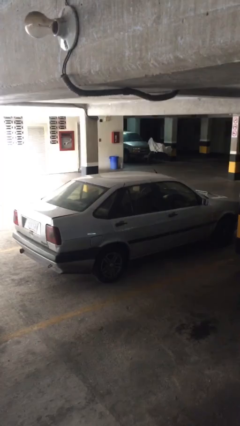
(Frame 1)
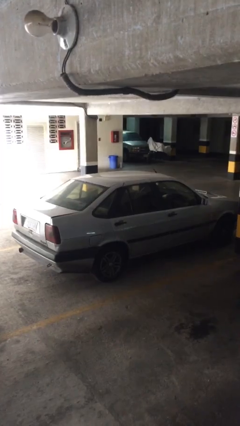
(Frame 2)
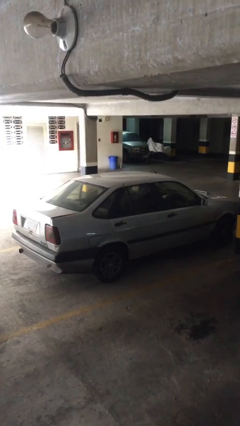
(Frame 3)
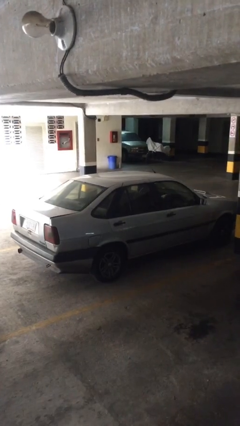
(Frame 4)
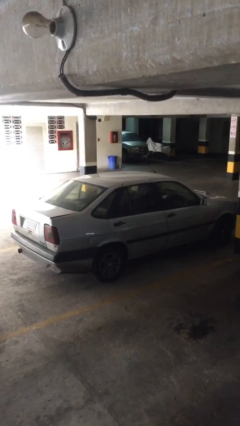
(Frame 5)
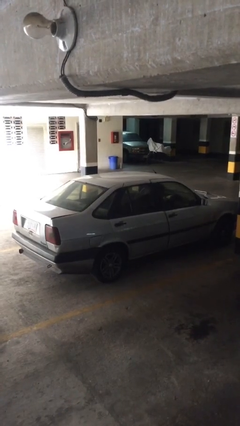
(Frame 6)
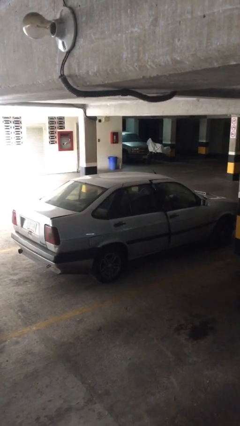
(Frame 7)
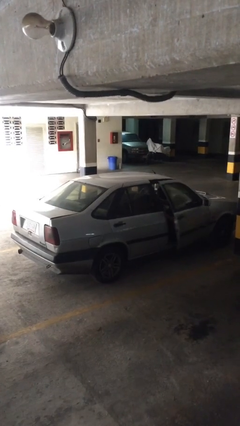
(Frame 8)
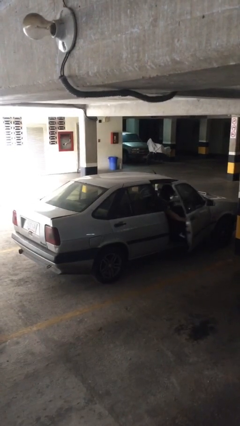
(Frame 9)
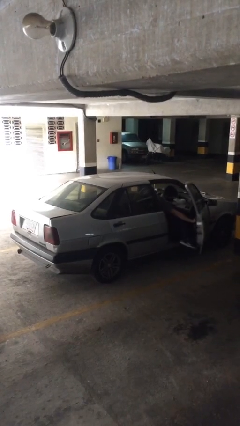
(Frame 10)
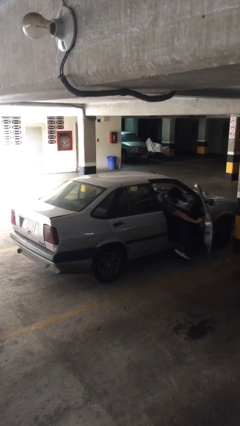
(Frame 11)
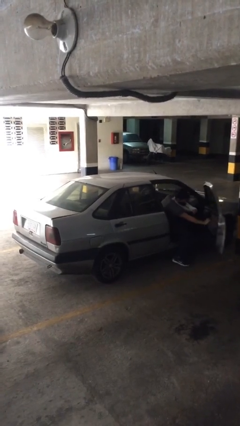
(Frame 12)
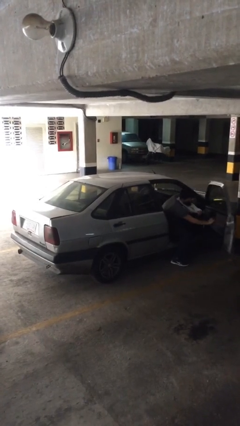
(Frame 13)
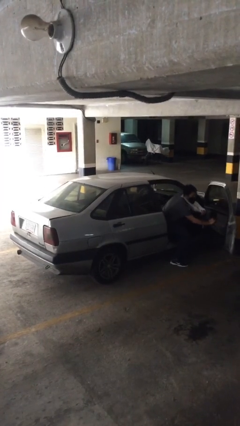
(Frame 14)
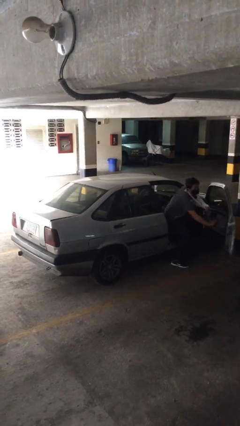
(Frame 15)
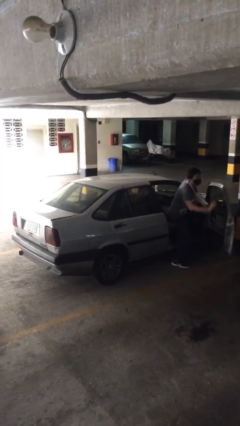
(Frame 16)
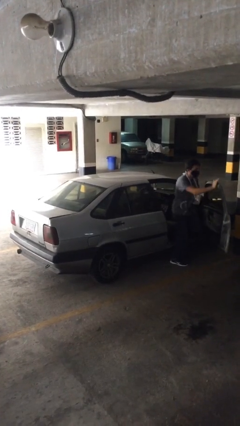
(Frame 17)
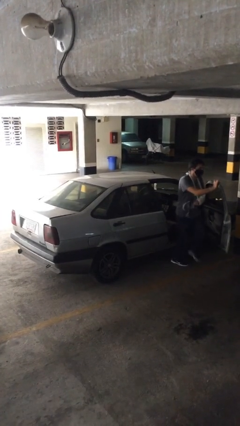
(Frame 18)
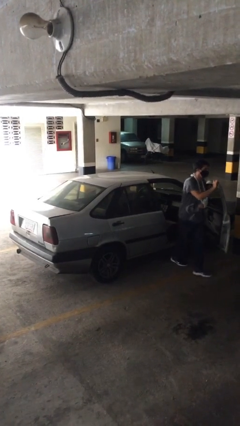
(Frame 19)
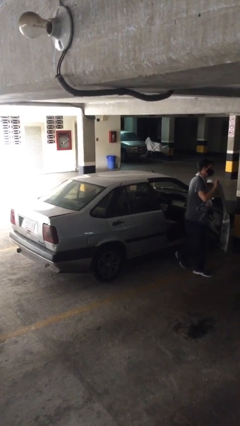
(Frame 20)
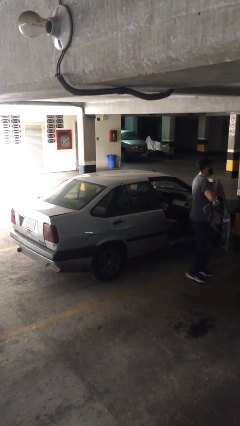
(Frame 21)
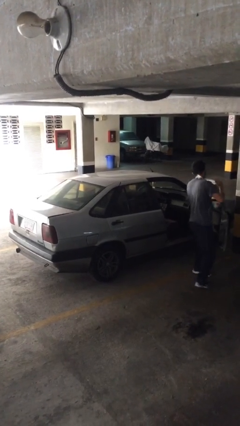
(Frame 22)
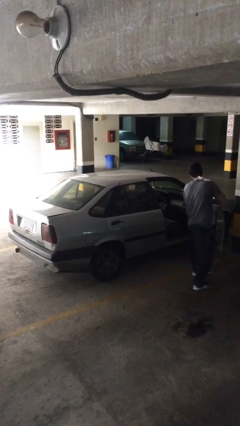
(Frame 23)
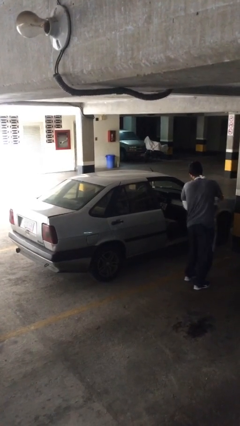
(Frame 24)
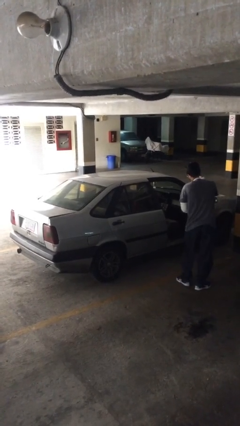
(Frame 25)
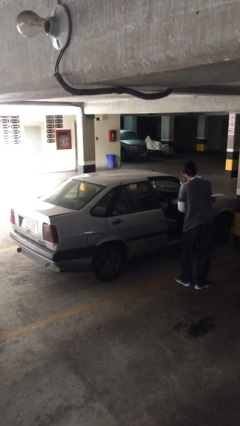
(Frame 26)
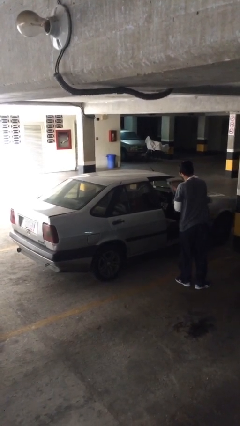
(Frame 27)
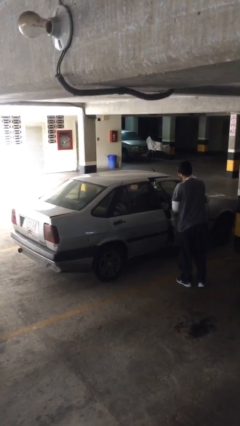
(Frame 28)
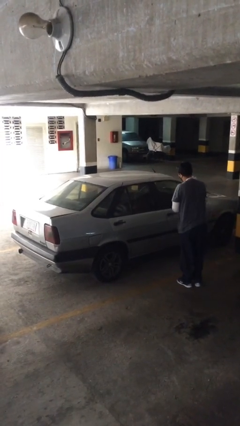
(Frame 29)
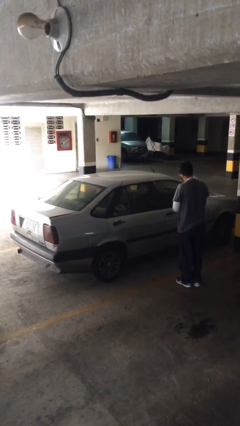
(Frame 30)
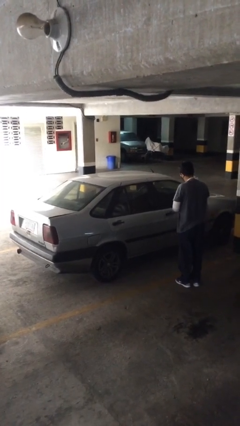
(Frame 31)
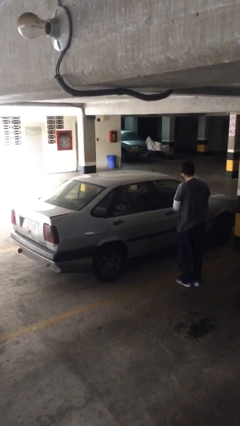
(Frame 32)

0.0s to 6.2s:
car drops off person

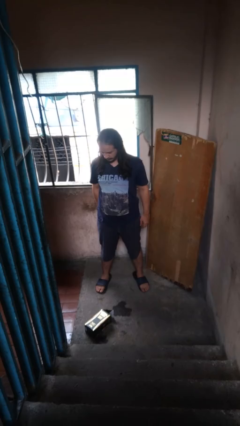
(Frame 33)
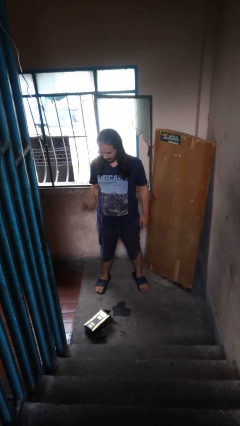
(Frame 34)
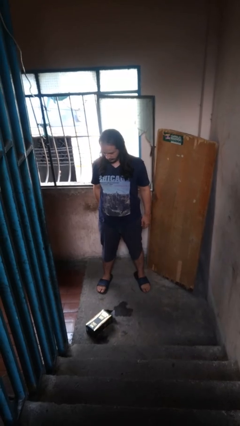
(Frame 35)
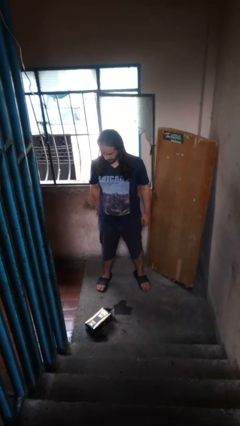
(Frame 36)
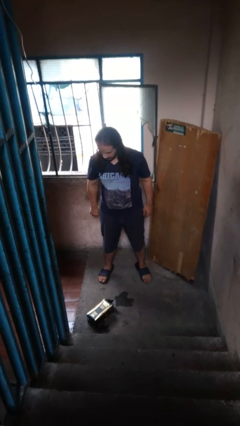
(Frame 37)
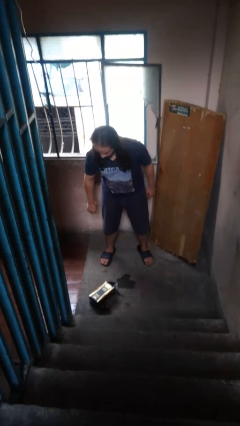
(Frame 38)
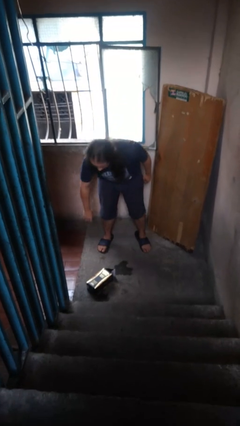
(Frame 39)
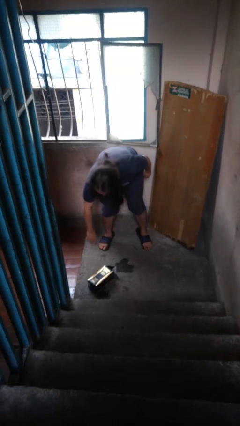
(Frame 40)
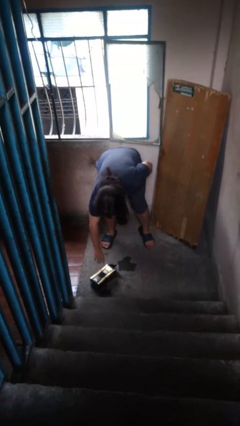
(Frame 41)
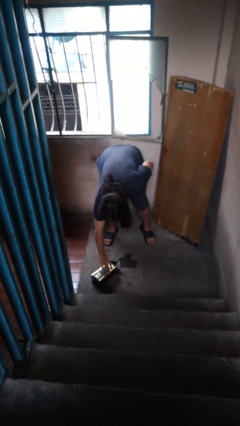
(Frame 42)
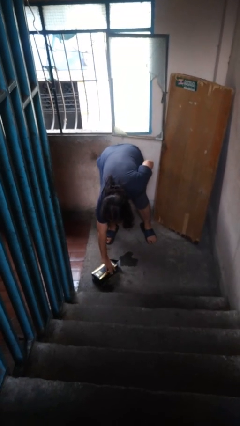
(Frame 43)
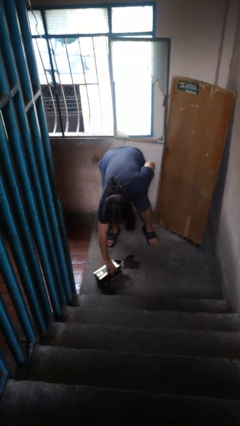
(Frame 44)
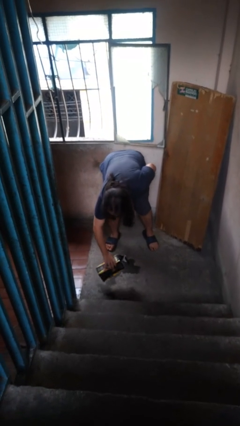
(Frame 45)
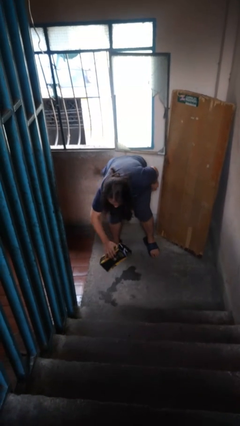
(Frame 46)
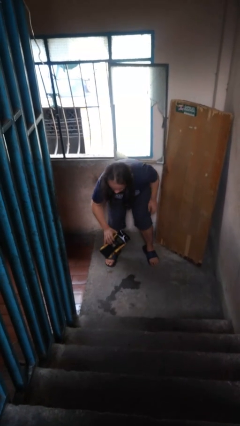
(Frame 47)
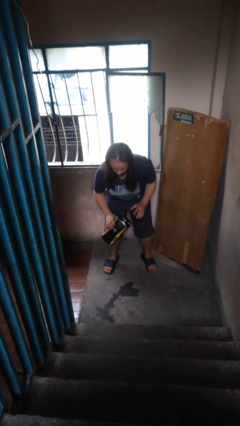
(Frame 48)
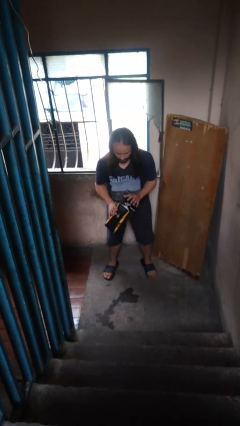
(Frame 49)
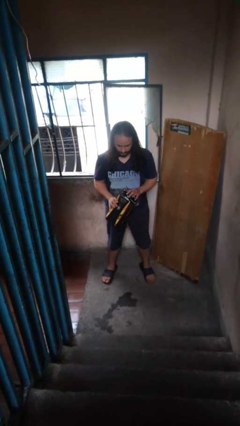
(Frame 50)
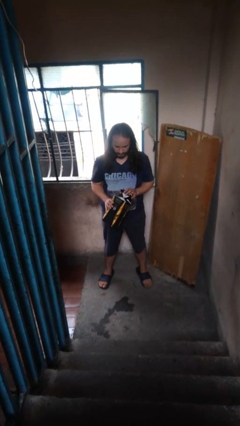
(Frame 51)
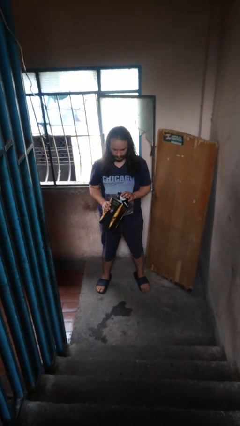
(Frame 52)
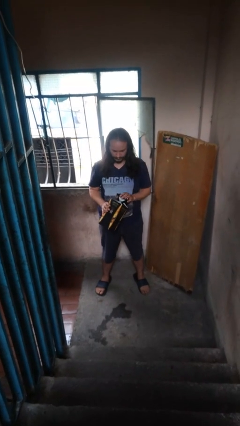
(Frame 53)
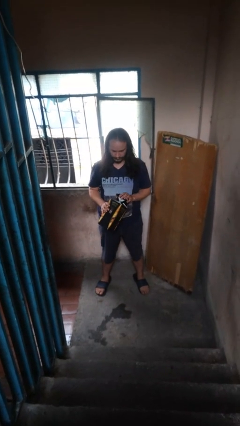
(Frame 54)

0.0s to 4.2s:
person picks up object from floor

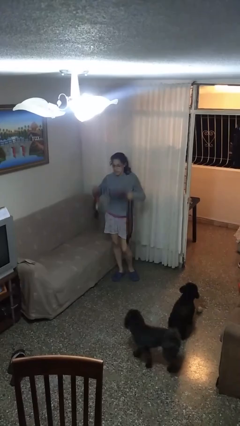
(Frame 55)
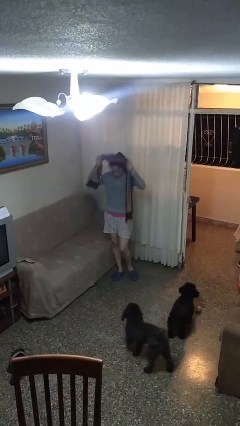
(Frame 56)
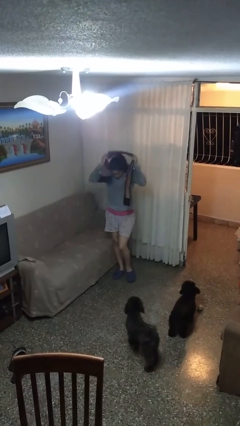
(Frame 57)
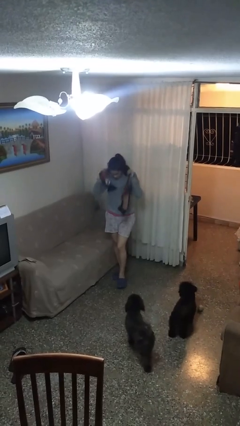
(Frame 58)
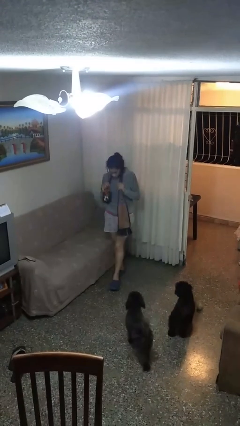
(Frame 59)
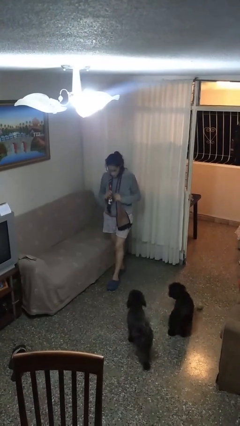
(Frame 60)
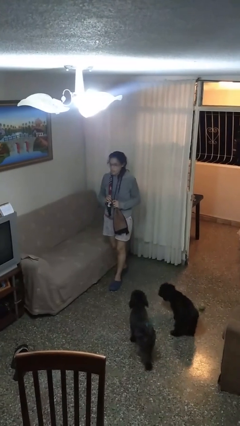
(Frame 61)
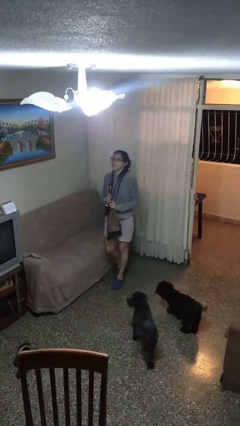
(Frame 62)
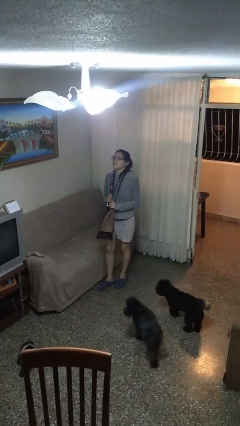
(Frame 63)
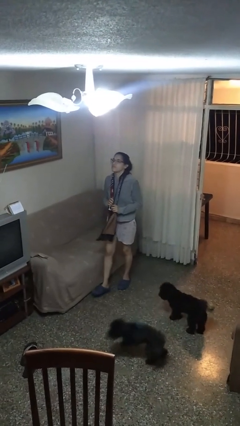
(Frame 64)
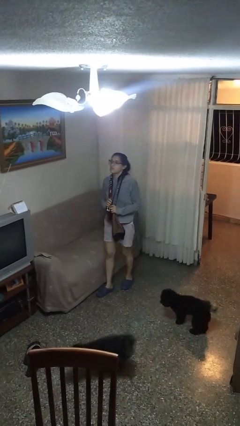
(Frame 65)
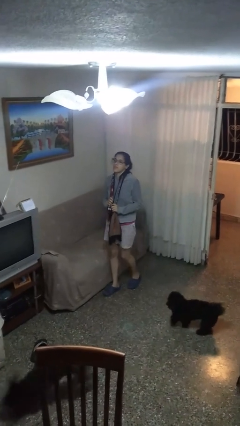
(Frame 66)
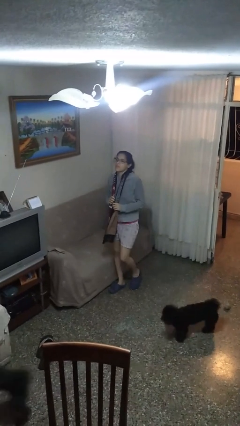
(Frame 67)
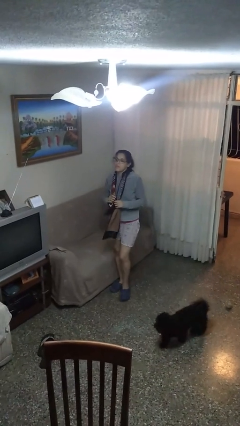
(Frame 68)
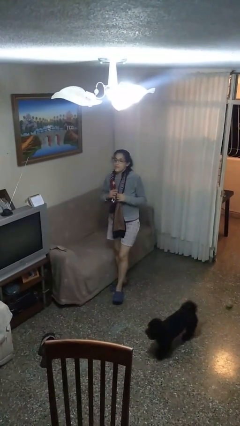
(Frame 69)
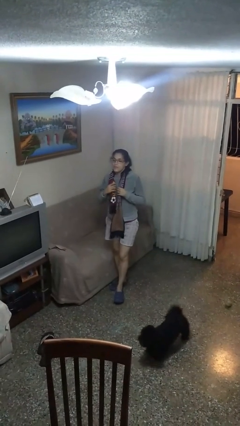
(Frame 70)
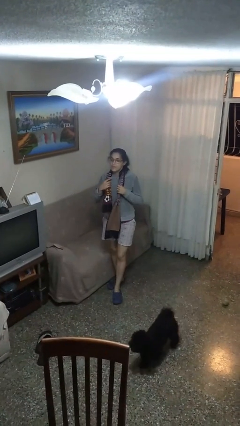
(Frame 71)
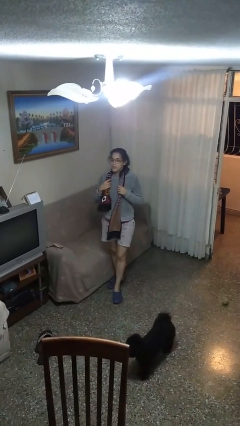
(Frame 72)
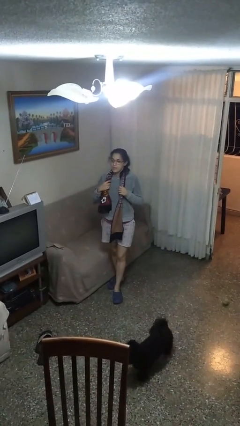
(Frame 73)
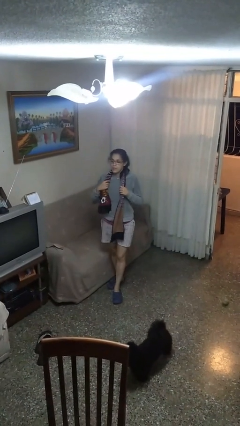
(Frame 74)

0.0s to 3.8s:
person puts on scarf

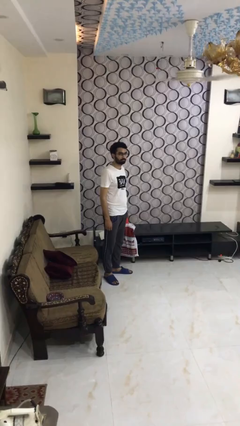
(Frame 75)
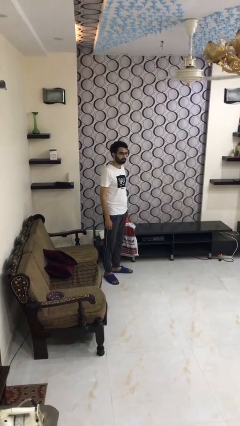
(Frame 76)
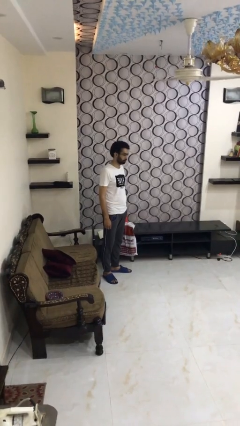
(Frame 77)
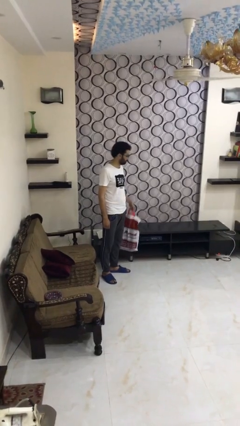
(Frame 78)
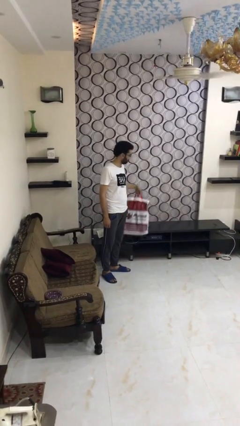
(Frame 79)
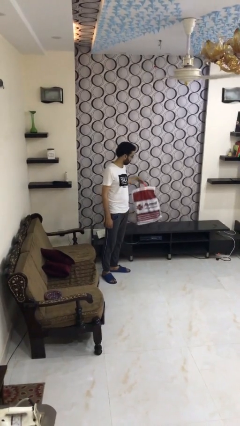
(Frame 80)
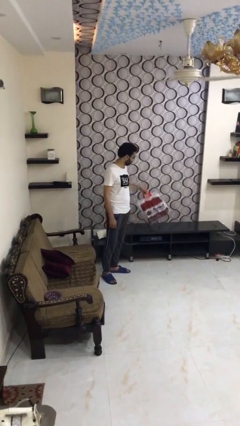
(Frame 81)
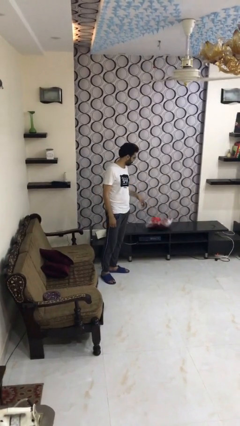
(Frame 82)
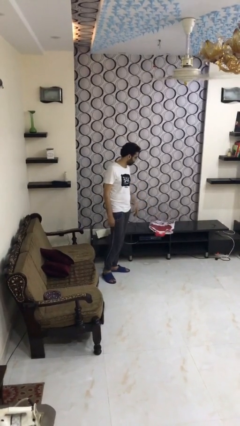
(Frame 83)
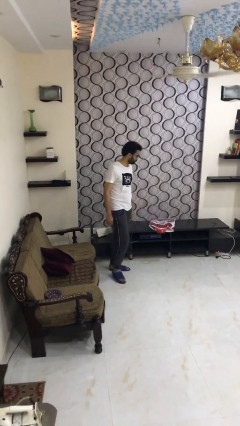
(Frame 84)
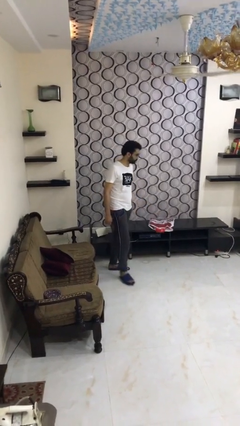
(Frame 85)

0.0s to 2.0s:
person puts down object on table

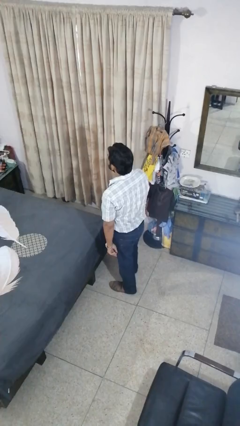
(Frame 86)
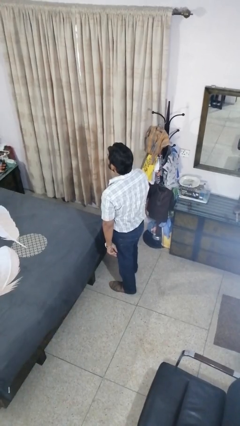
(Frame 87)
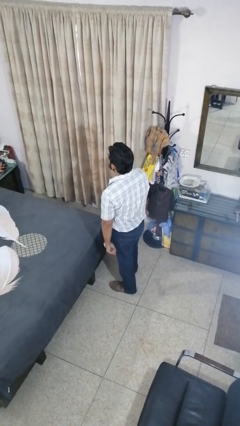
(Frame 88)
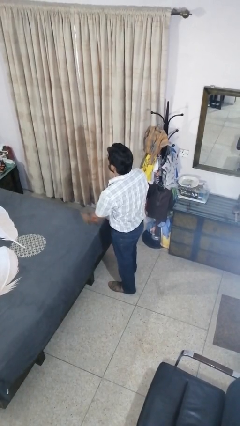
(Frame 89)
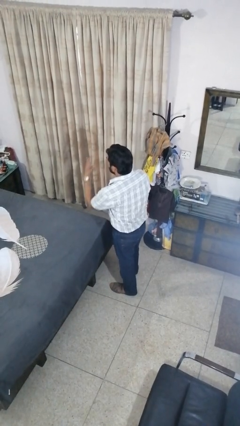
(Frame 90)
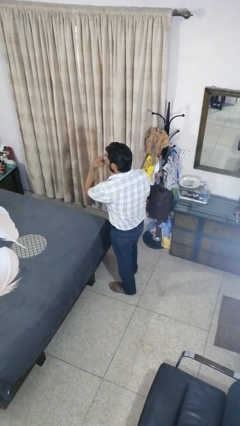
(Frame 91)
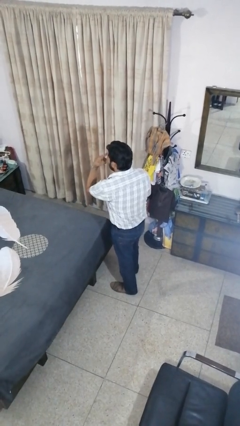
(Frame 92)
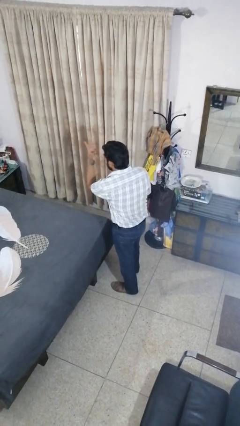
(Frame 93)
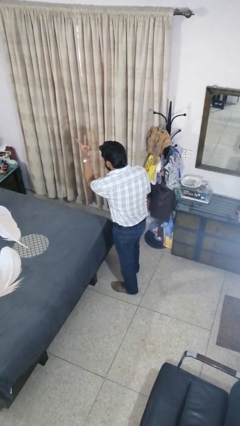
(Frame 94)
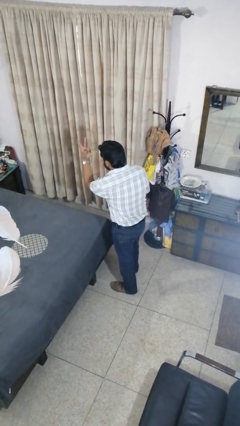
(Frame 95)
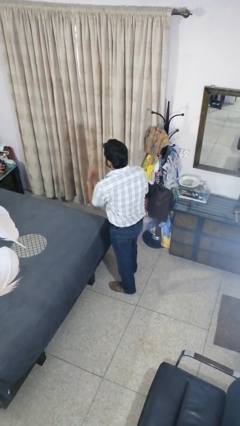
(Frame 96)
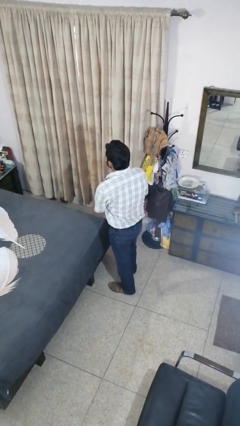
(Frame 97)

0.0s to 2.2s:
person gestures watch closely
